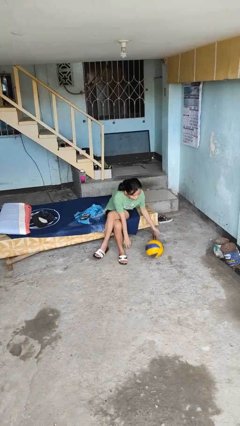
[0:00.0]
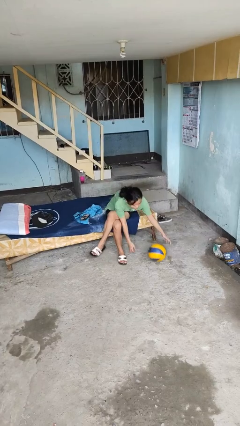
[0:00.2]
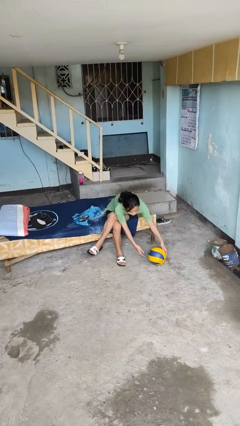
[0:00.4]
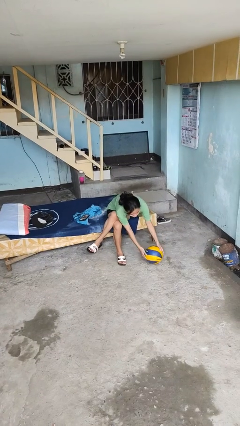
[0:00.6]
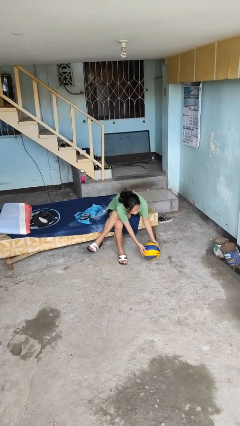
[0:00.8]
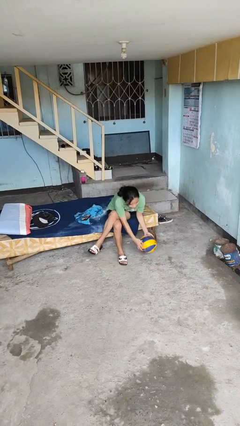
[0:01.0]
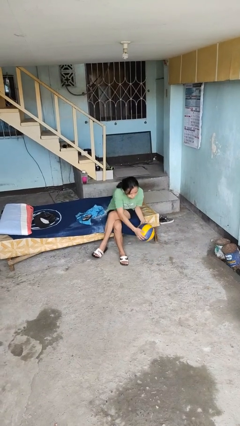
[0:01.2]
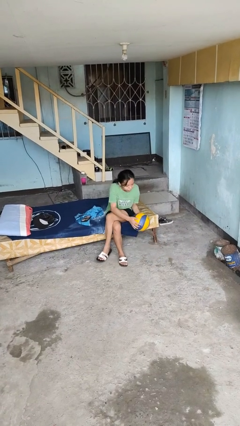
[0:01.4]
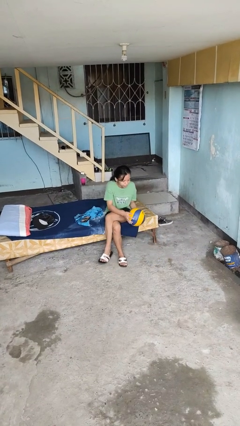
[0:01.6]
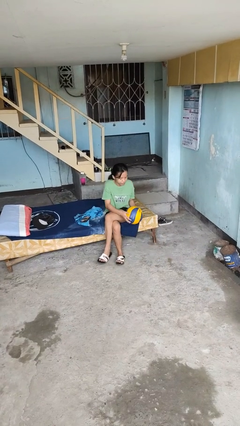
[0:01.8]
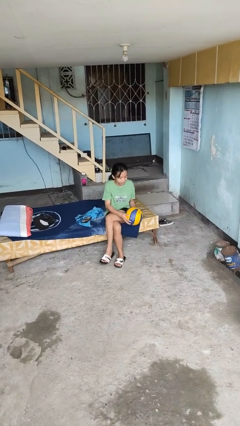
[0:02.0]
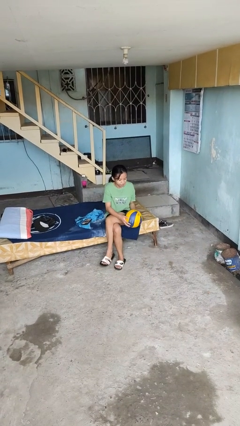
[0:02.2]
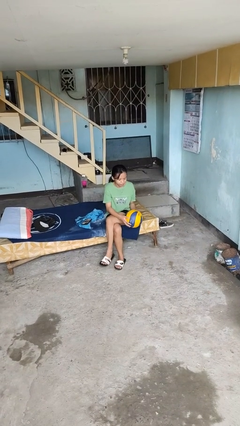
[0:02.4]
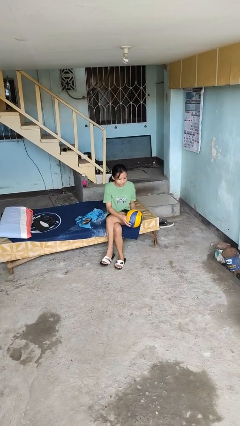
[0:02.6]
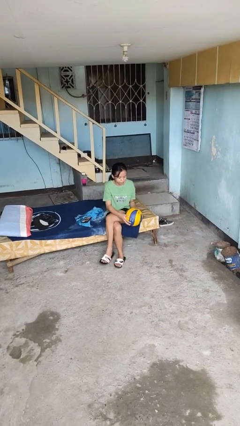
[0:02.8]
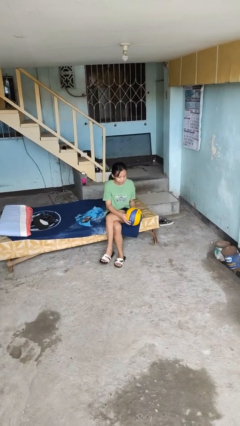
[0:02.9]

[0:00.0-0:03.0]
person picks up object from floor

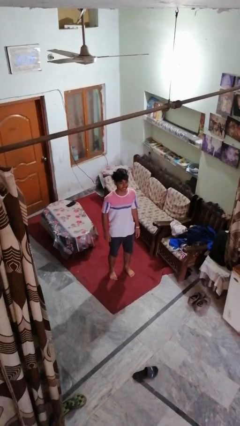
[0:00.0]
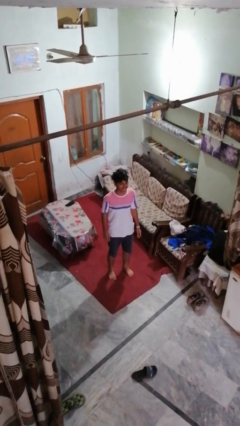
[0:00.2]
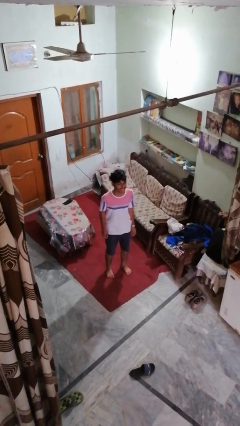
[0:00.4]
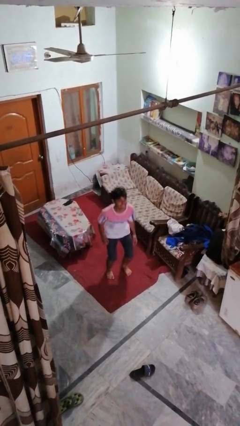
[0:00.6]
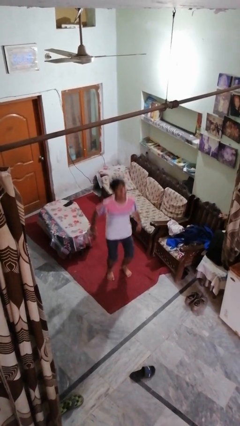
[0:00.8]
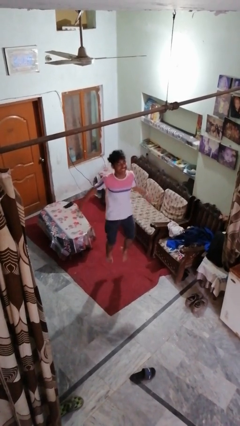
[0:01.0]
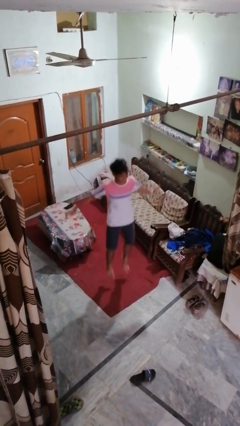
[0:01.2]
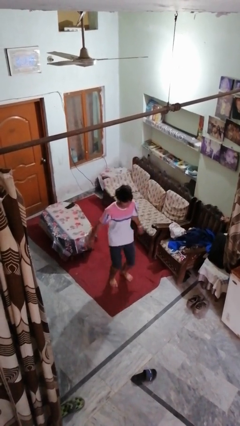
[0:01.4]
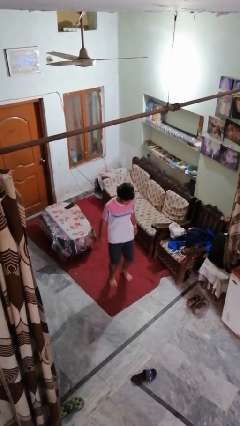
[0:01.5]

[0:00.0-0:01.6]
person jumps

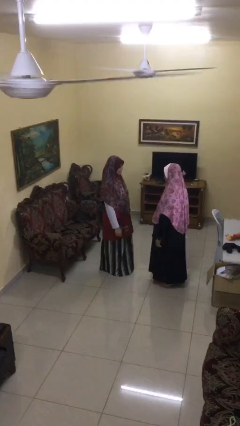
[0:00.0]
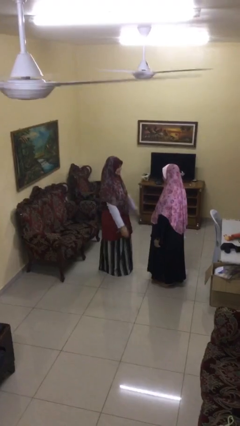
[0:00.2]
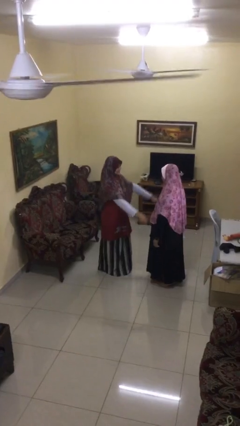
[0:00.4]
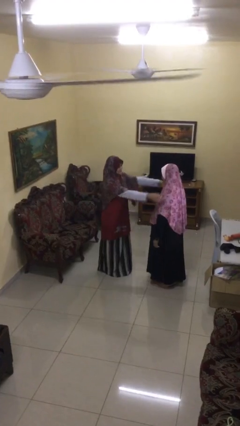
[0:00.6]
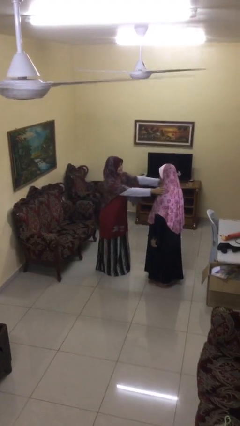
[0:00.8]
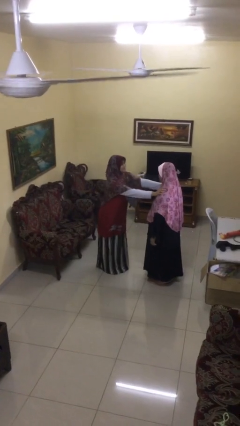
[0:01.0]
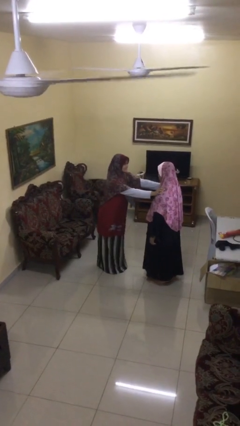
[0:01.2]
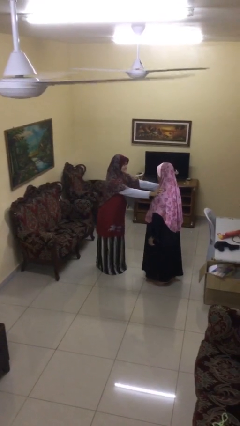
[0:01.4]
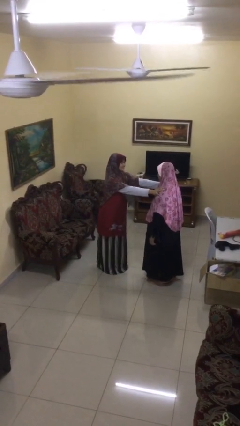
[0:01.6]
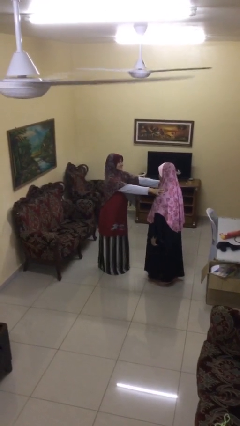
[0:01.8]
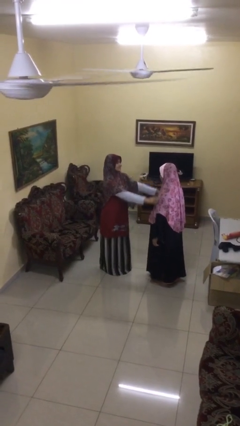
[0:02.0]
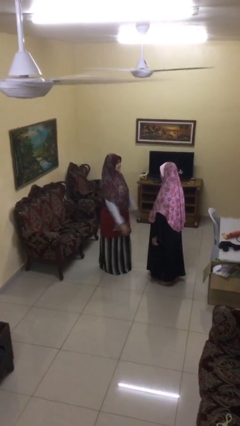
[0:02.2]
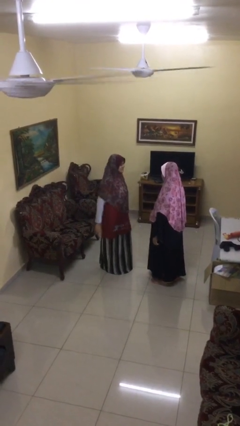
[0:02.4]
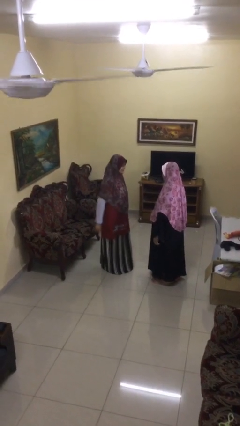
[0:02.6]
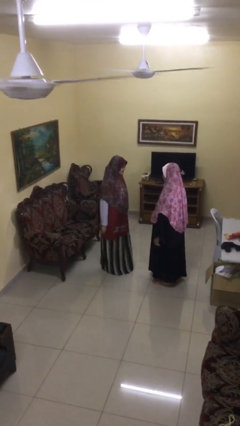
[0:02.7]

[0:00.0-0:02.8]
person pounds shoulders of person

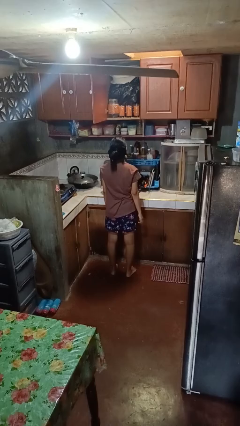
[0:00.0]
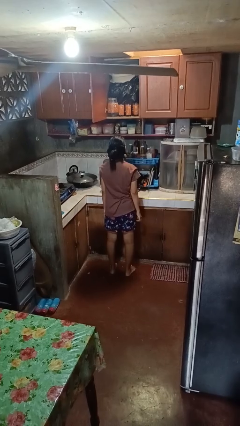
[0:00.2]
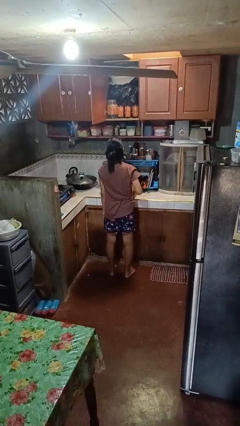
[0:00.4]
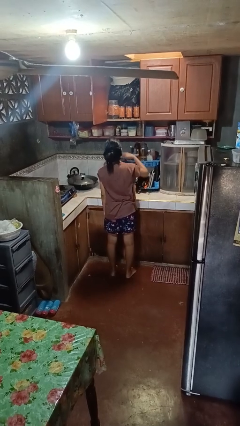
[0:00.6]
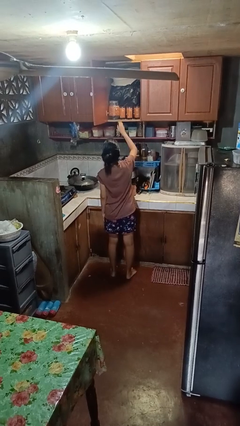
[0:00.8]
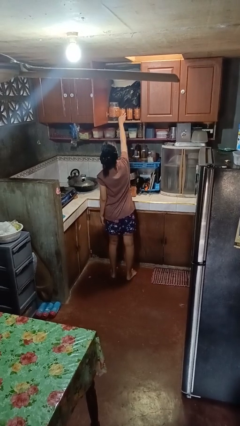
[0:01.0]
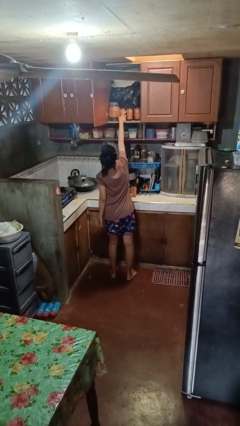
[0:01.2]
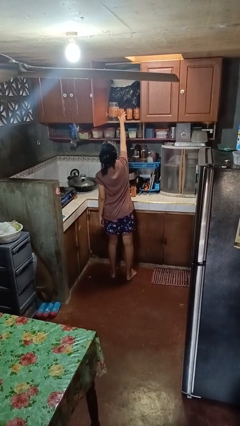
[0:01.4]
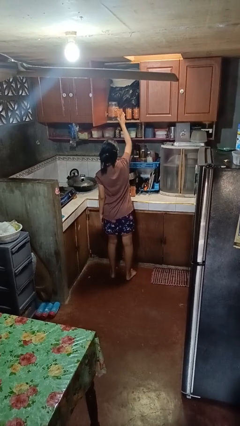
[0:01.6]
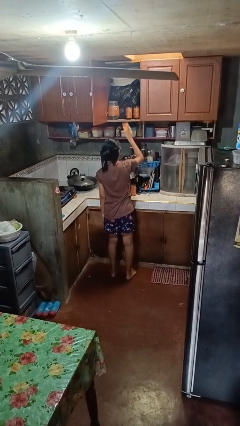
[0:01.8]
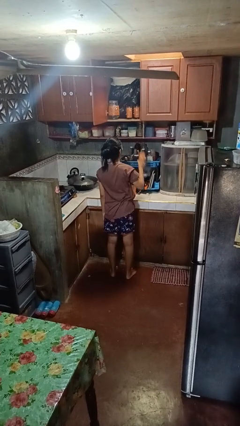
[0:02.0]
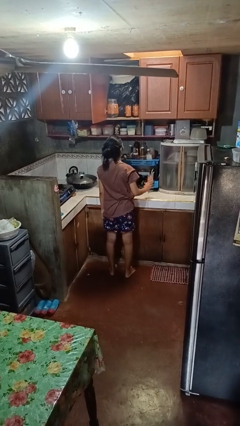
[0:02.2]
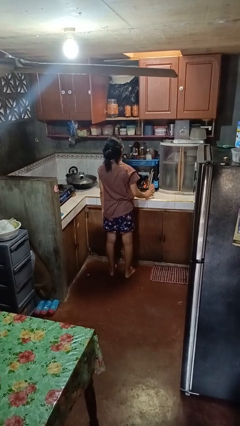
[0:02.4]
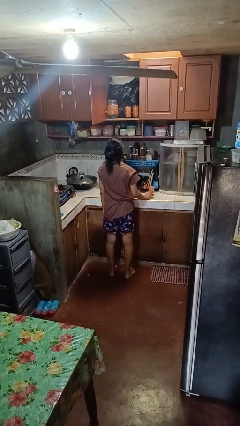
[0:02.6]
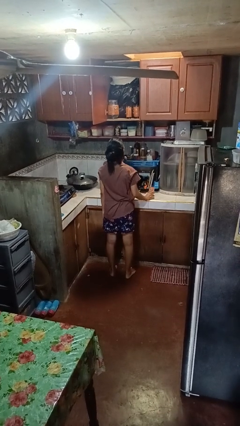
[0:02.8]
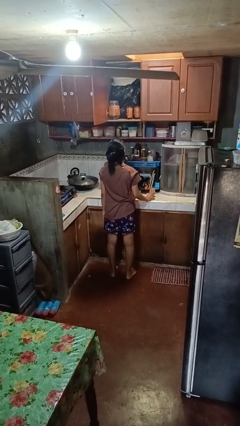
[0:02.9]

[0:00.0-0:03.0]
person takes object from cabinet

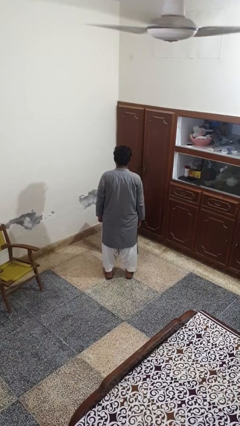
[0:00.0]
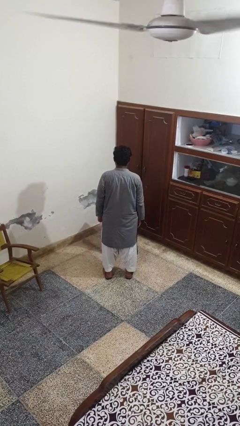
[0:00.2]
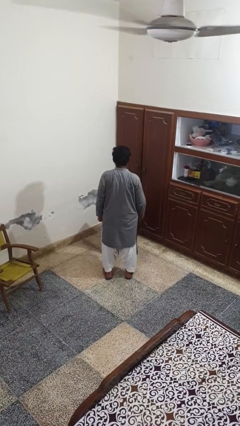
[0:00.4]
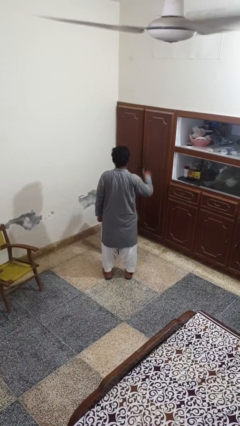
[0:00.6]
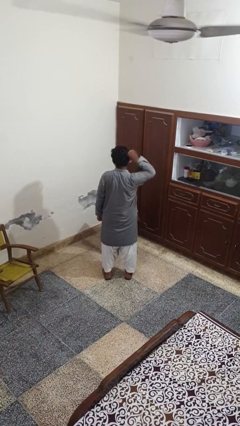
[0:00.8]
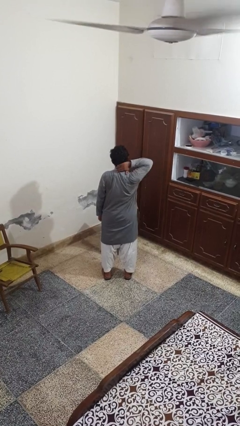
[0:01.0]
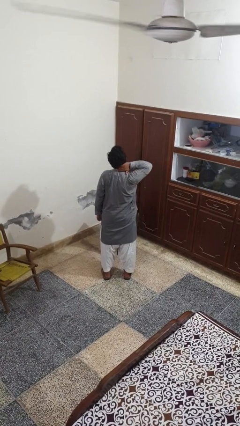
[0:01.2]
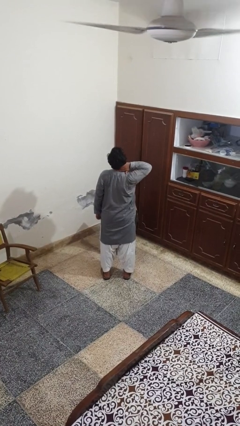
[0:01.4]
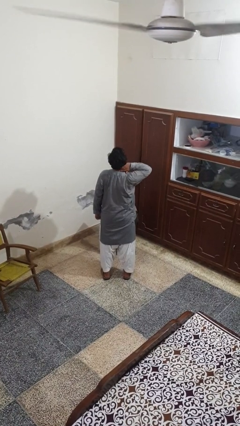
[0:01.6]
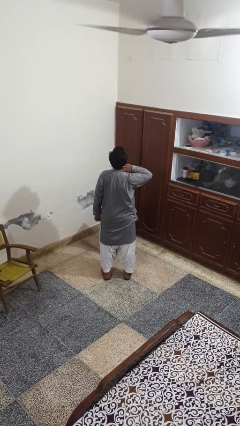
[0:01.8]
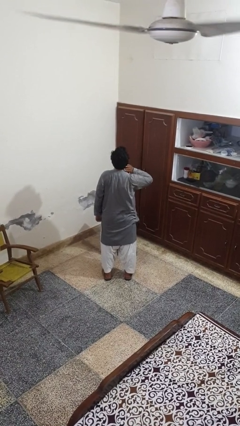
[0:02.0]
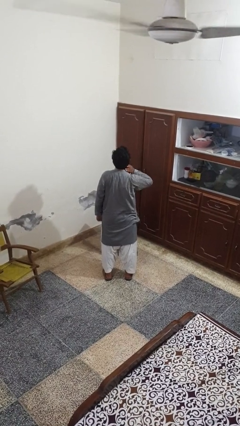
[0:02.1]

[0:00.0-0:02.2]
person rubs neck

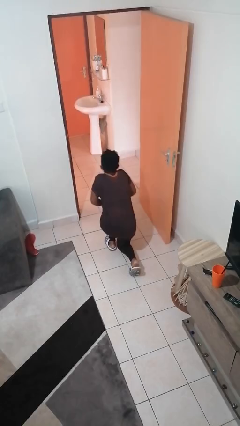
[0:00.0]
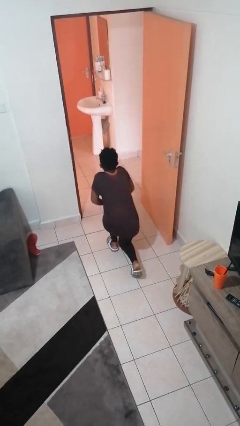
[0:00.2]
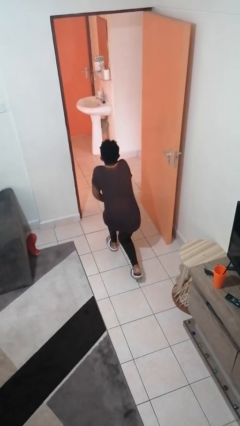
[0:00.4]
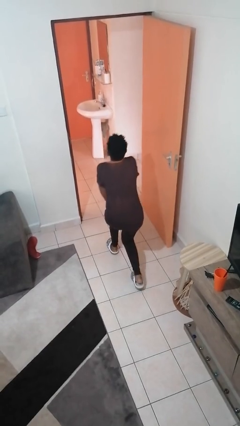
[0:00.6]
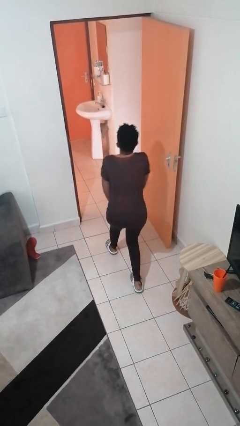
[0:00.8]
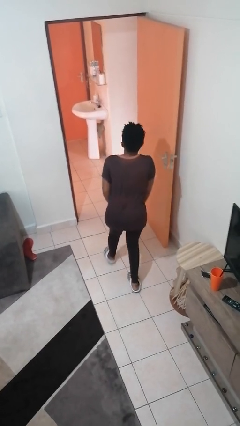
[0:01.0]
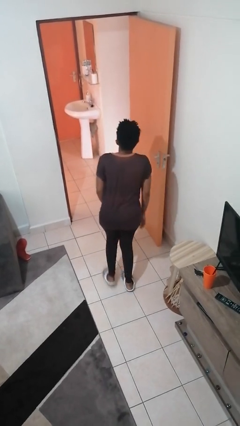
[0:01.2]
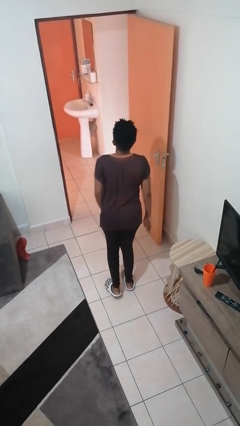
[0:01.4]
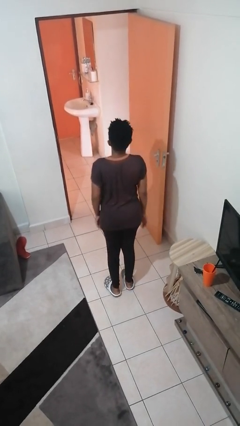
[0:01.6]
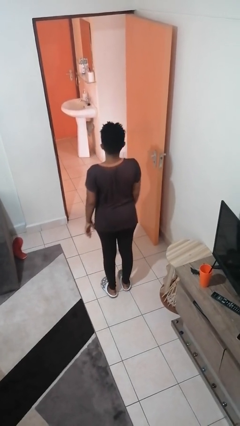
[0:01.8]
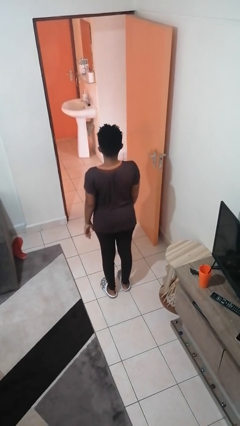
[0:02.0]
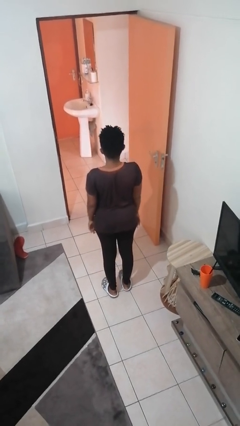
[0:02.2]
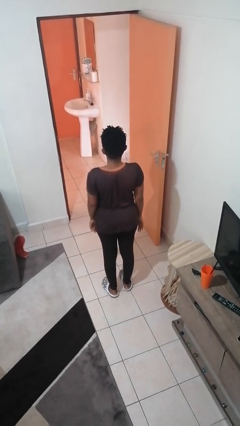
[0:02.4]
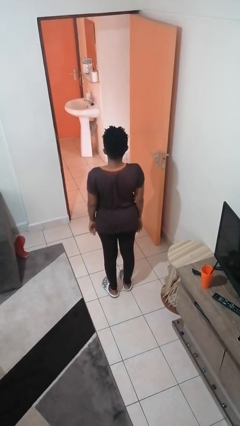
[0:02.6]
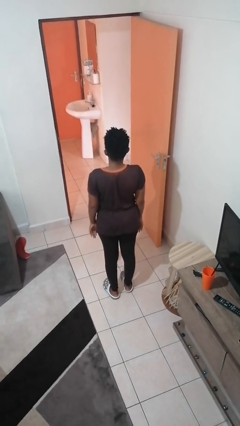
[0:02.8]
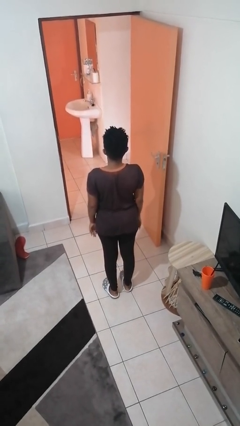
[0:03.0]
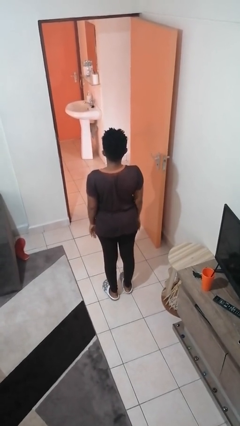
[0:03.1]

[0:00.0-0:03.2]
person stands up from floor

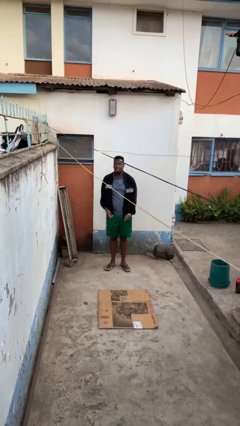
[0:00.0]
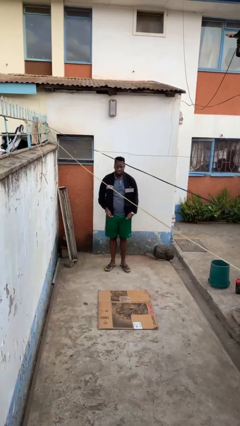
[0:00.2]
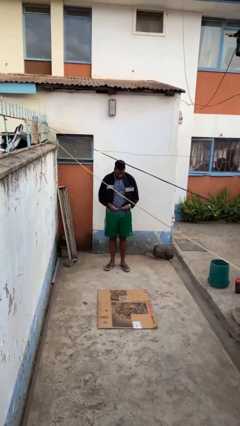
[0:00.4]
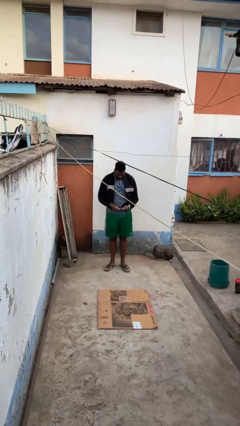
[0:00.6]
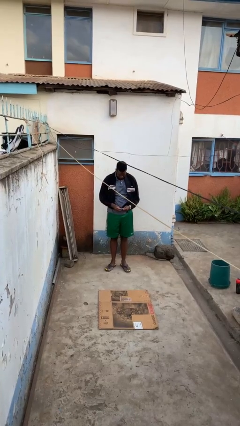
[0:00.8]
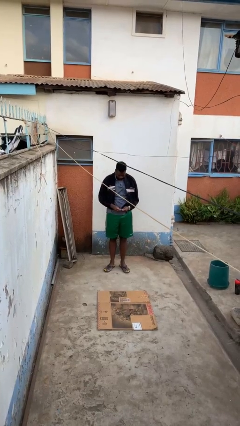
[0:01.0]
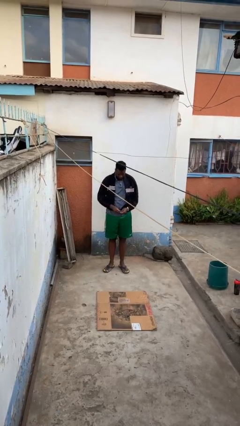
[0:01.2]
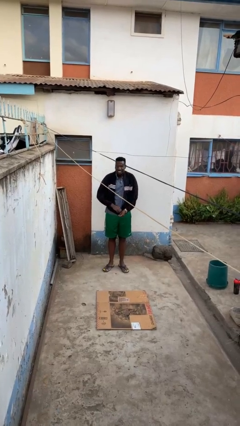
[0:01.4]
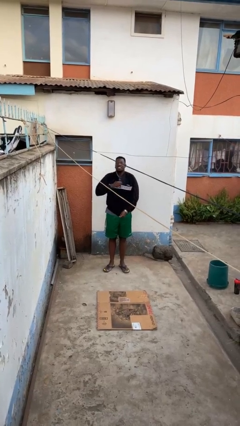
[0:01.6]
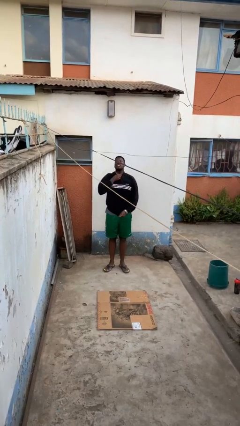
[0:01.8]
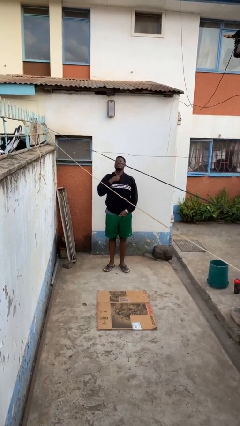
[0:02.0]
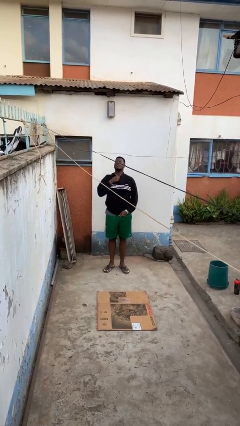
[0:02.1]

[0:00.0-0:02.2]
person zips up jacket
